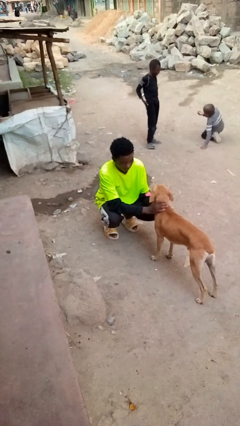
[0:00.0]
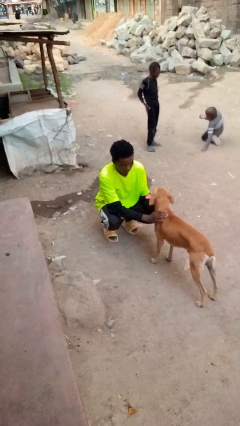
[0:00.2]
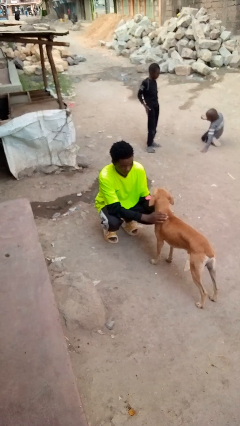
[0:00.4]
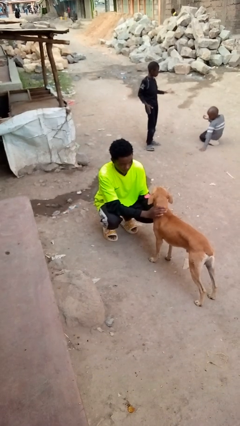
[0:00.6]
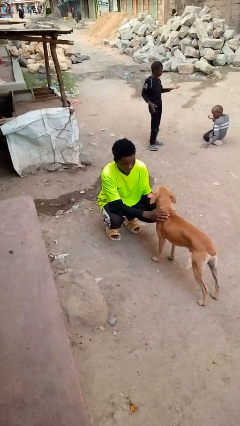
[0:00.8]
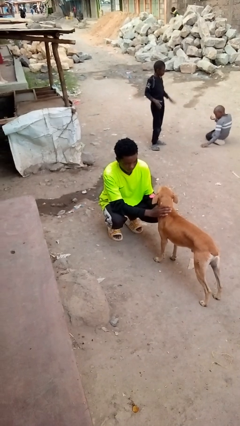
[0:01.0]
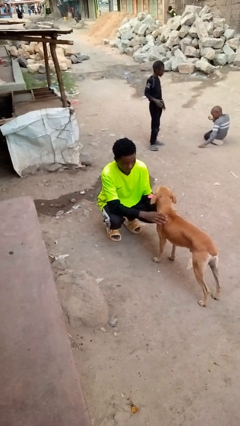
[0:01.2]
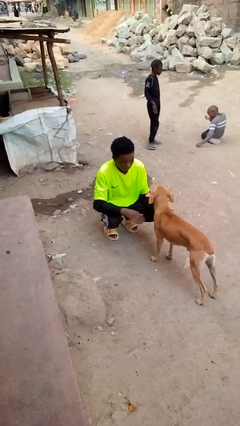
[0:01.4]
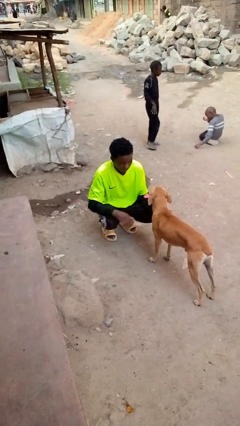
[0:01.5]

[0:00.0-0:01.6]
person pets dog

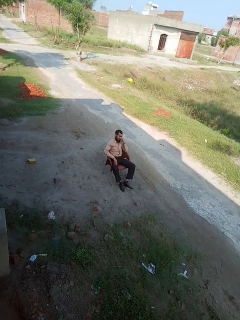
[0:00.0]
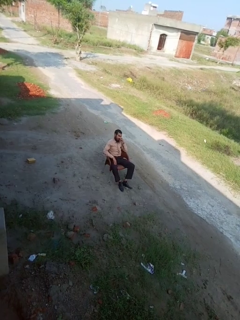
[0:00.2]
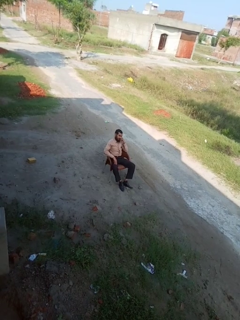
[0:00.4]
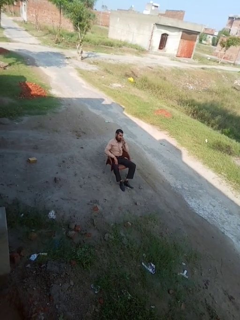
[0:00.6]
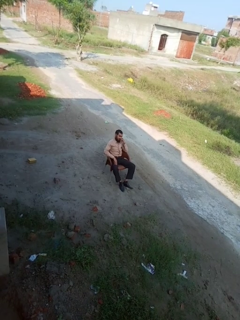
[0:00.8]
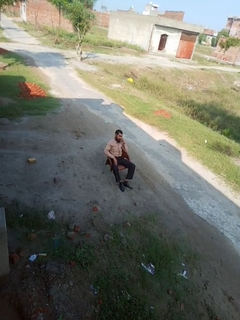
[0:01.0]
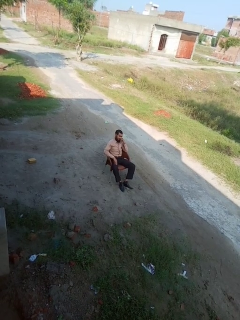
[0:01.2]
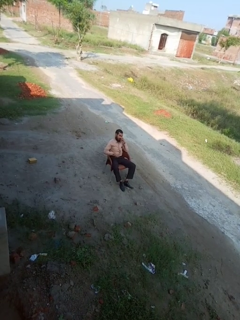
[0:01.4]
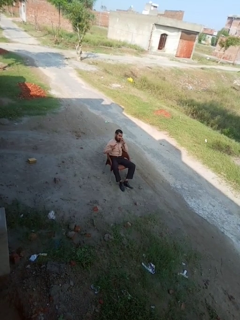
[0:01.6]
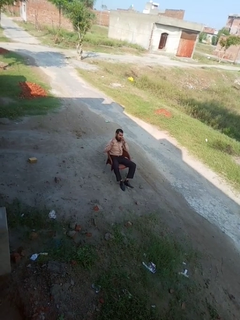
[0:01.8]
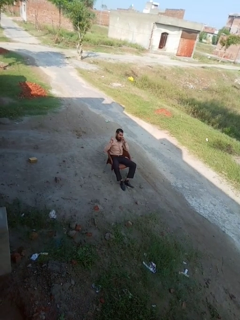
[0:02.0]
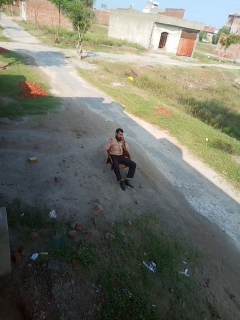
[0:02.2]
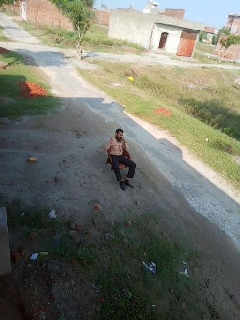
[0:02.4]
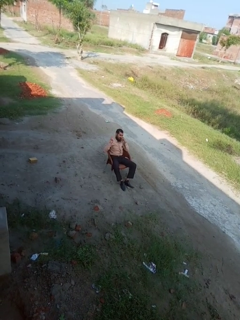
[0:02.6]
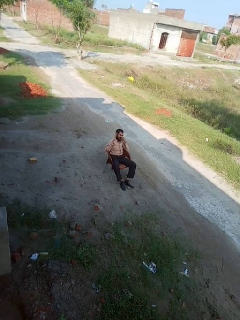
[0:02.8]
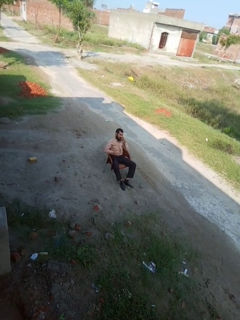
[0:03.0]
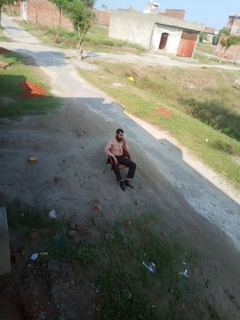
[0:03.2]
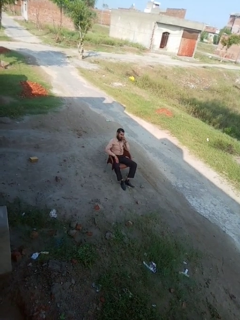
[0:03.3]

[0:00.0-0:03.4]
person gestures number three

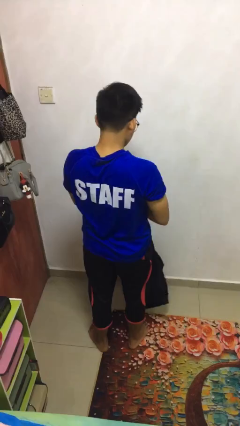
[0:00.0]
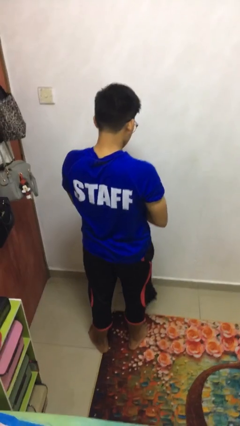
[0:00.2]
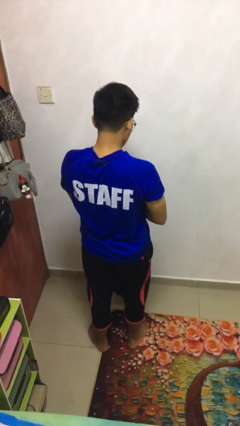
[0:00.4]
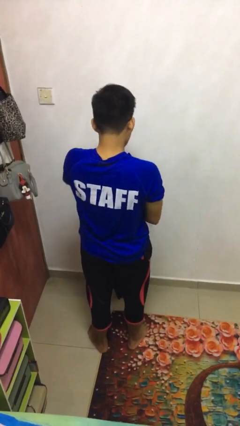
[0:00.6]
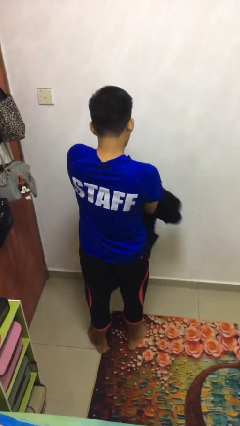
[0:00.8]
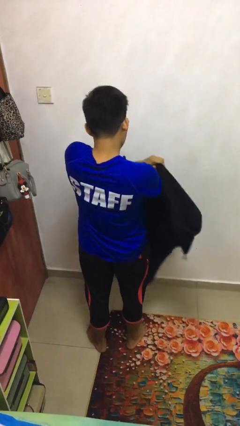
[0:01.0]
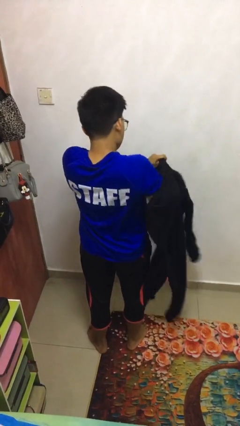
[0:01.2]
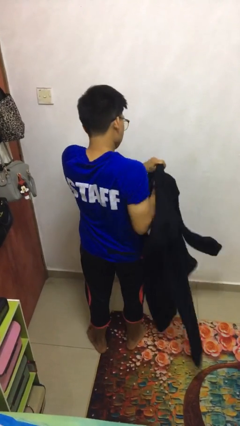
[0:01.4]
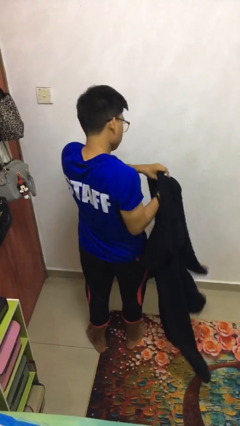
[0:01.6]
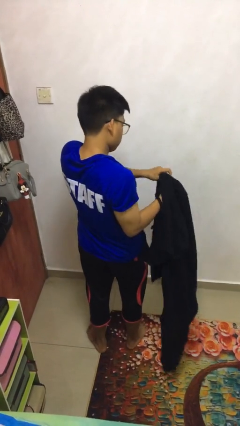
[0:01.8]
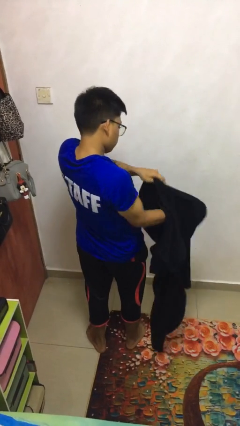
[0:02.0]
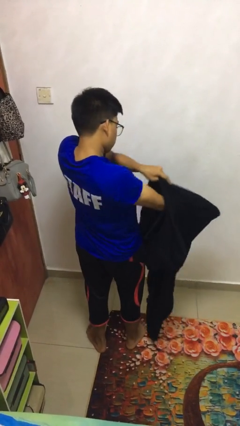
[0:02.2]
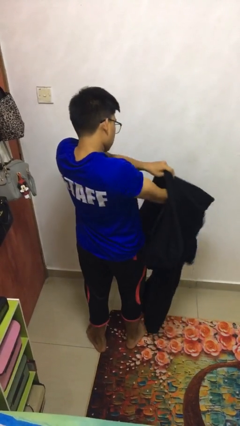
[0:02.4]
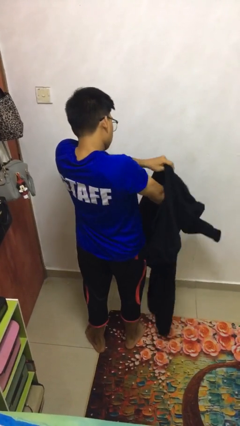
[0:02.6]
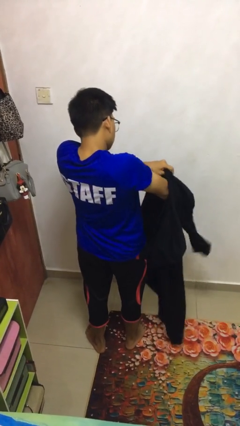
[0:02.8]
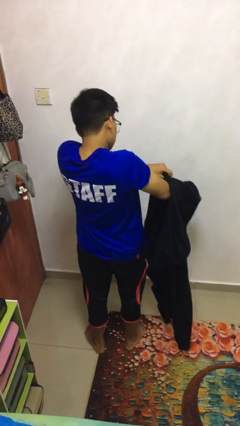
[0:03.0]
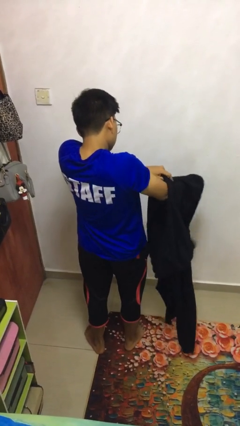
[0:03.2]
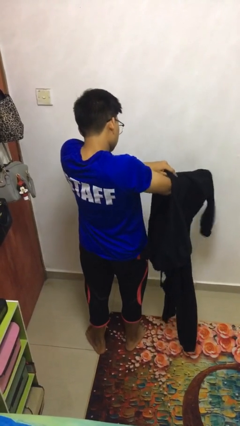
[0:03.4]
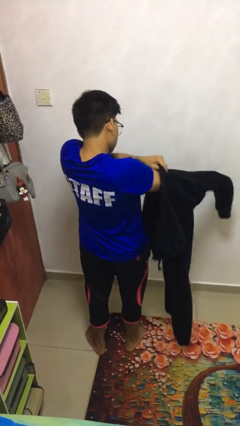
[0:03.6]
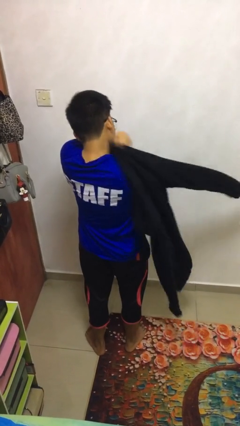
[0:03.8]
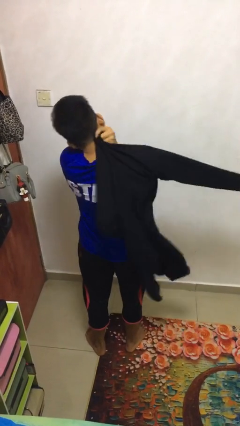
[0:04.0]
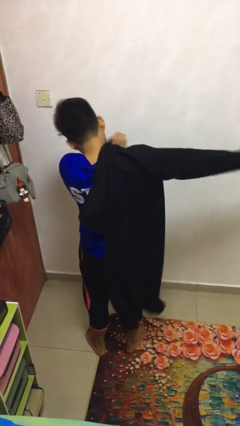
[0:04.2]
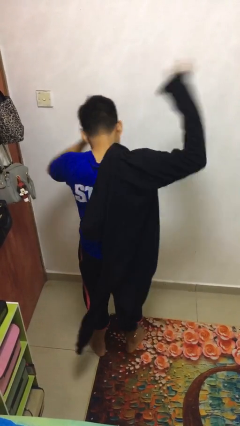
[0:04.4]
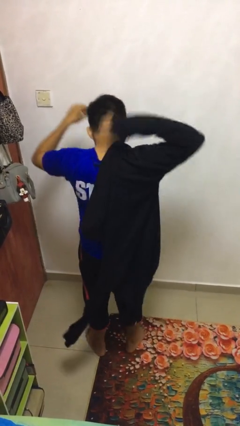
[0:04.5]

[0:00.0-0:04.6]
person puts on jacket

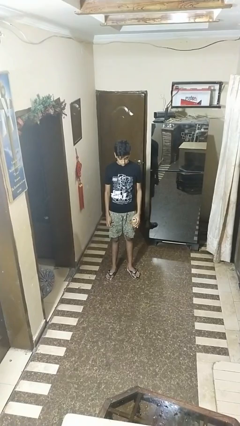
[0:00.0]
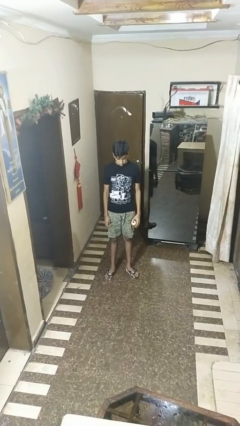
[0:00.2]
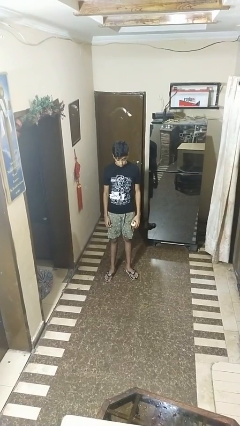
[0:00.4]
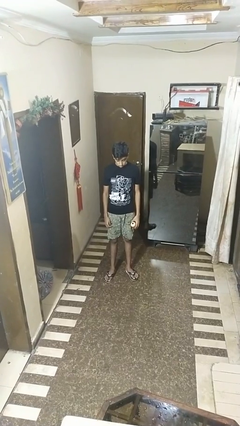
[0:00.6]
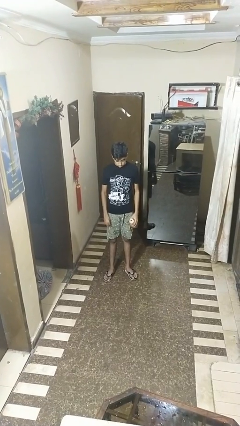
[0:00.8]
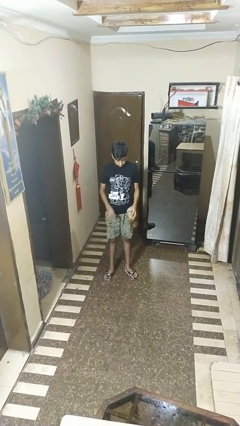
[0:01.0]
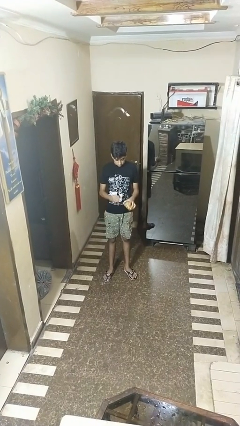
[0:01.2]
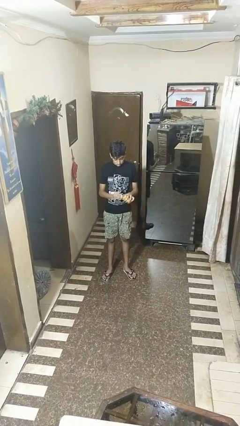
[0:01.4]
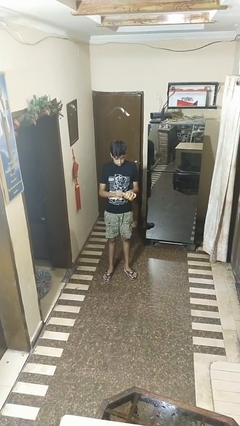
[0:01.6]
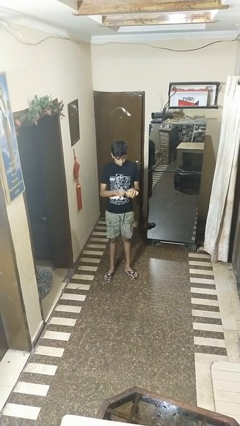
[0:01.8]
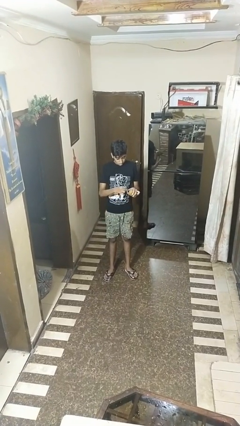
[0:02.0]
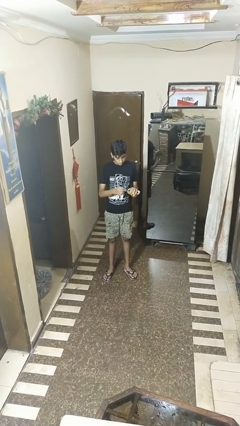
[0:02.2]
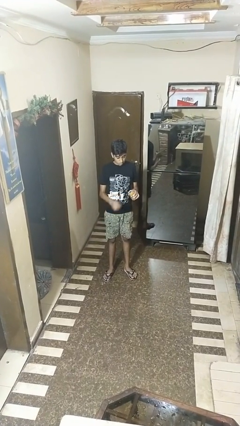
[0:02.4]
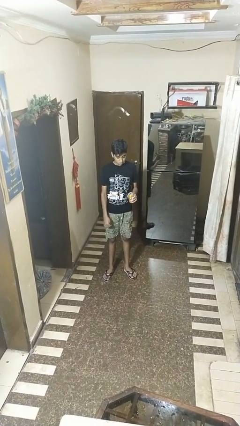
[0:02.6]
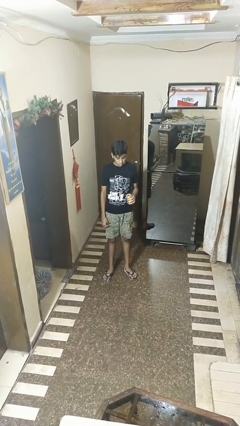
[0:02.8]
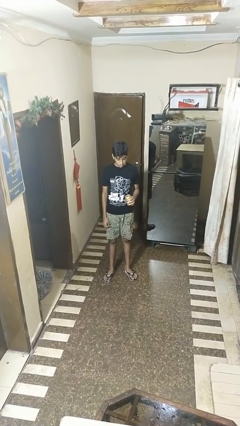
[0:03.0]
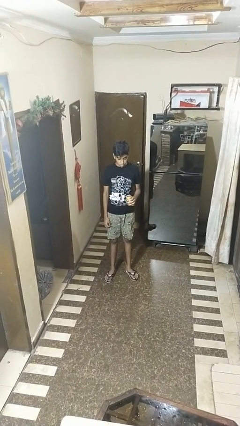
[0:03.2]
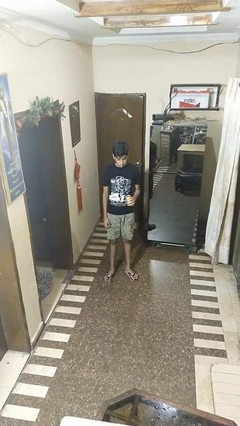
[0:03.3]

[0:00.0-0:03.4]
person opens beverage can

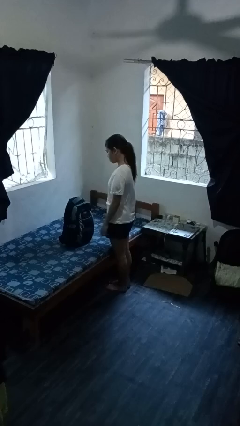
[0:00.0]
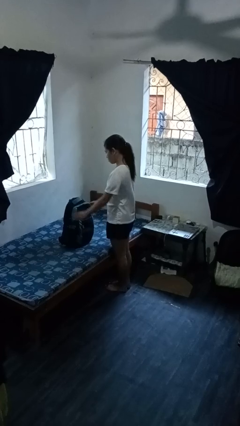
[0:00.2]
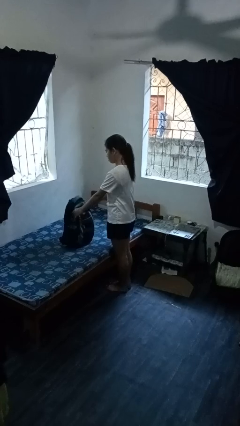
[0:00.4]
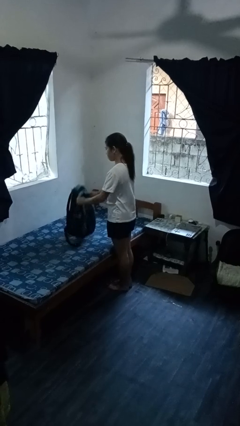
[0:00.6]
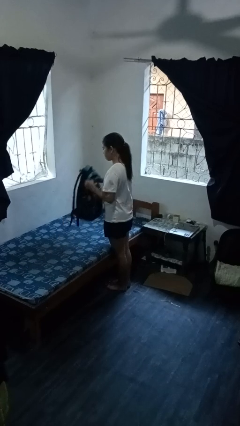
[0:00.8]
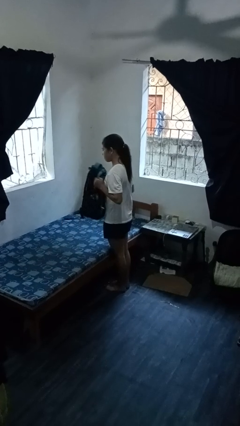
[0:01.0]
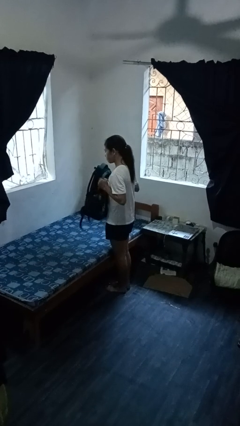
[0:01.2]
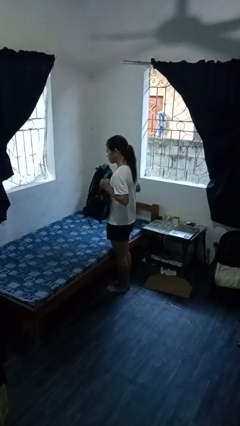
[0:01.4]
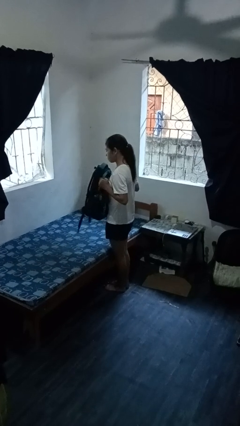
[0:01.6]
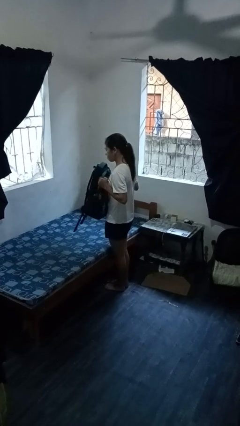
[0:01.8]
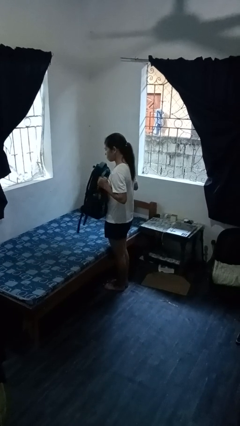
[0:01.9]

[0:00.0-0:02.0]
person picks up object from bed

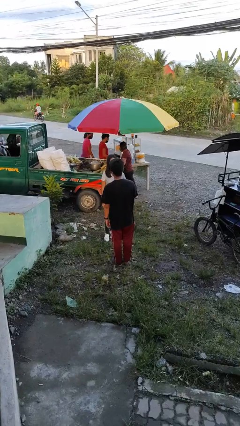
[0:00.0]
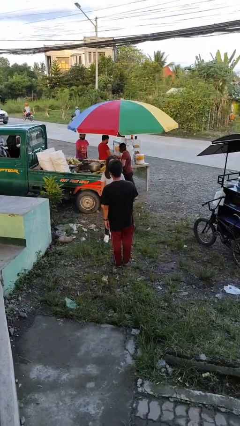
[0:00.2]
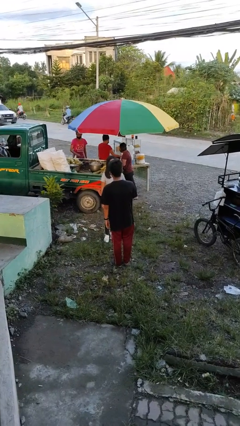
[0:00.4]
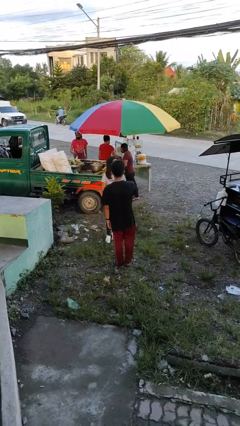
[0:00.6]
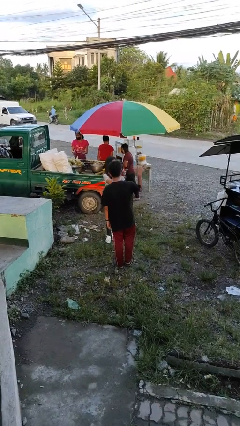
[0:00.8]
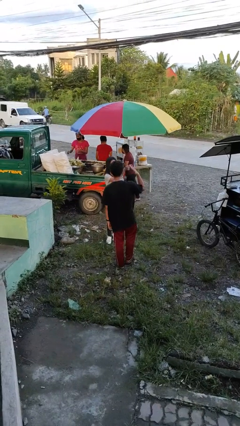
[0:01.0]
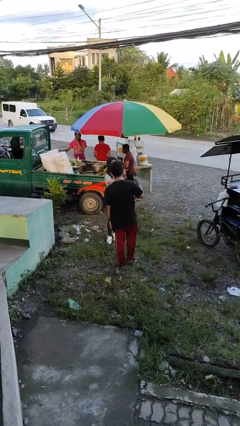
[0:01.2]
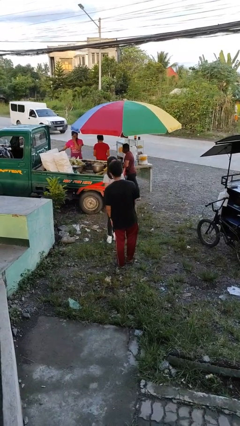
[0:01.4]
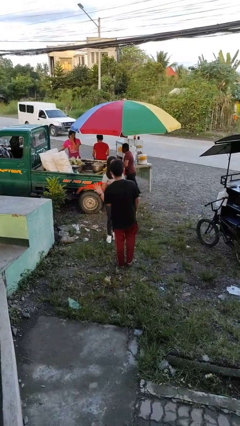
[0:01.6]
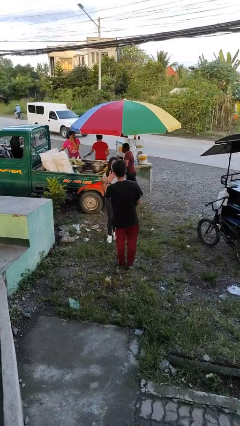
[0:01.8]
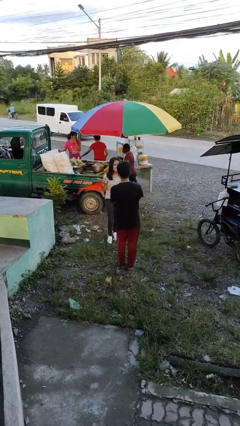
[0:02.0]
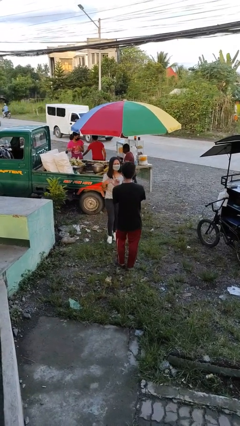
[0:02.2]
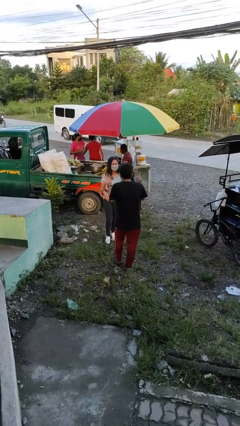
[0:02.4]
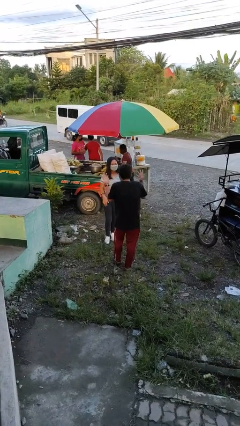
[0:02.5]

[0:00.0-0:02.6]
person talks to person

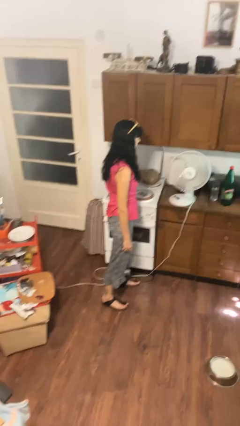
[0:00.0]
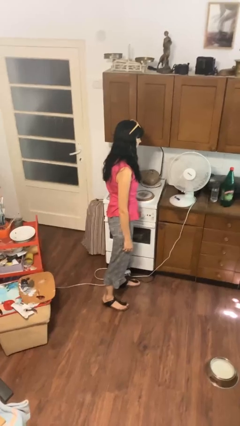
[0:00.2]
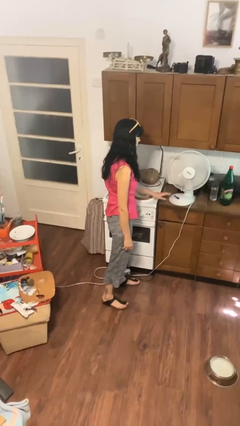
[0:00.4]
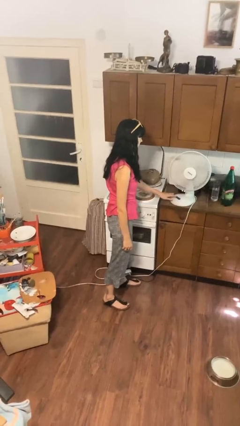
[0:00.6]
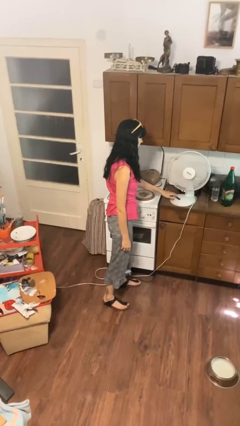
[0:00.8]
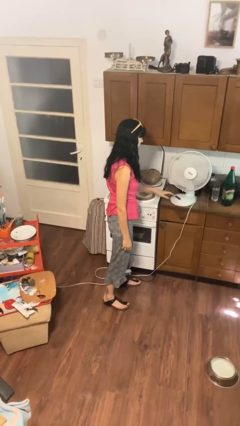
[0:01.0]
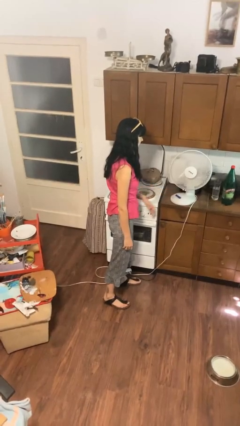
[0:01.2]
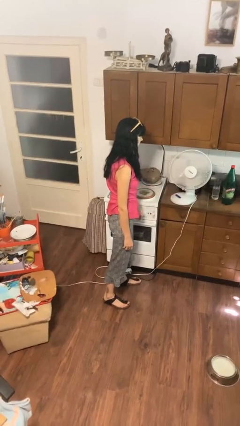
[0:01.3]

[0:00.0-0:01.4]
person turns off fan
